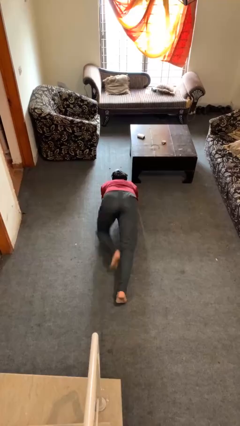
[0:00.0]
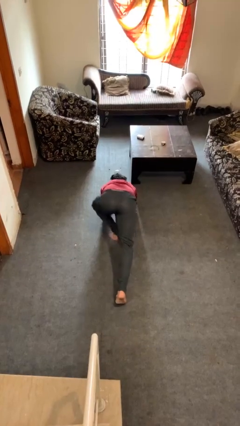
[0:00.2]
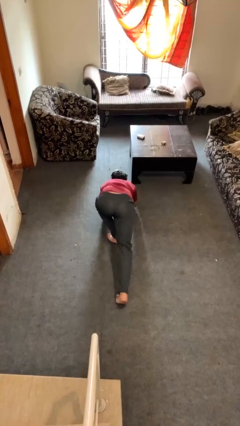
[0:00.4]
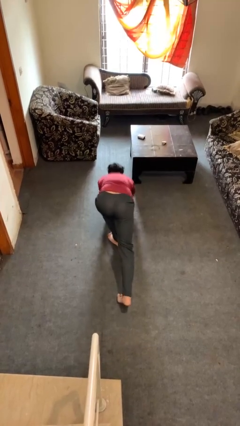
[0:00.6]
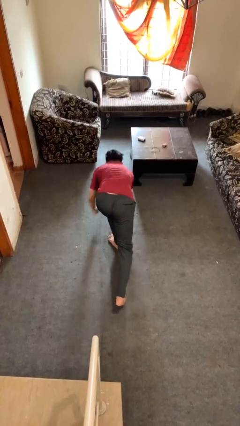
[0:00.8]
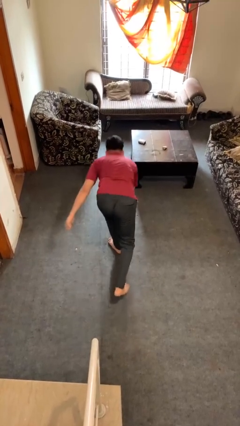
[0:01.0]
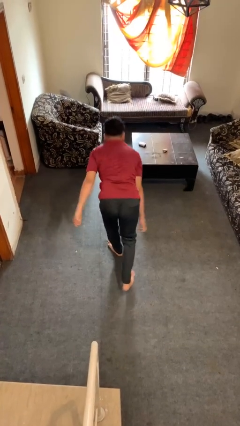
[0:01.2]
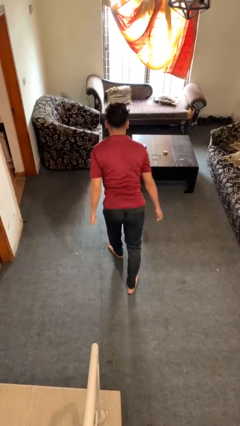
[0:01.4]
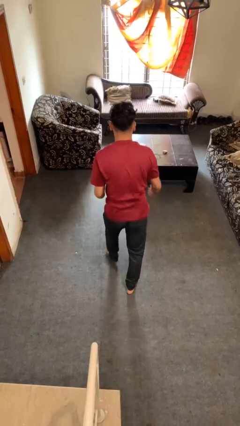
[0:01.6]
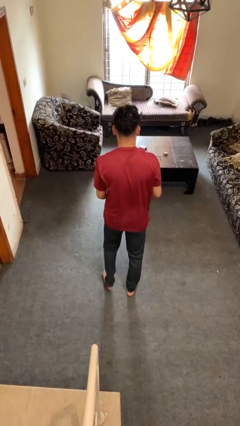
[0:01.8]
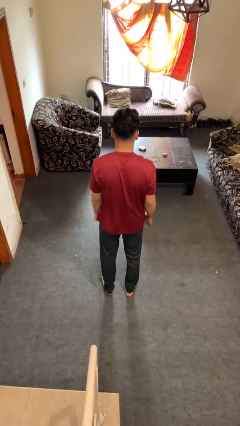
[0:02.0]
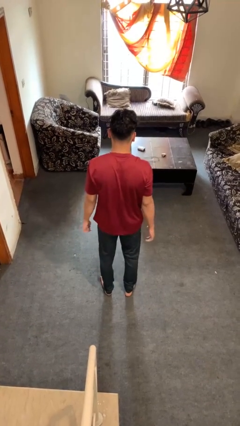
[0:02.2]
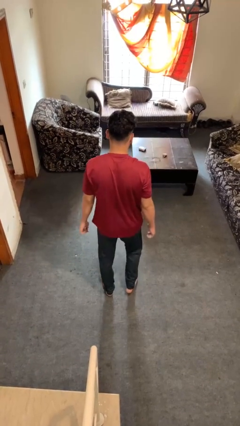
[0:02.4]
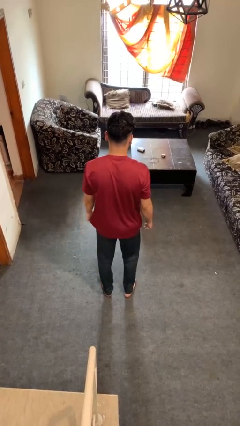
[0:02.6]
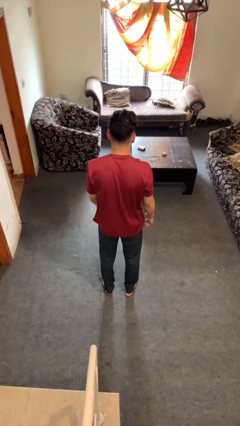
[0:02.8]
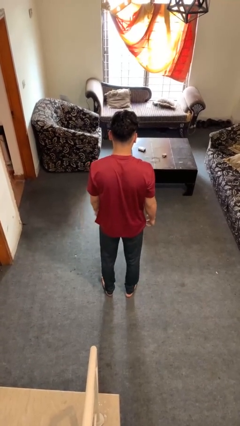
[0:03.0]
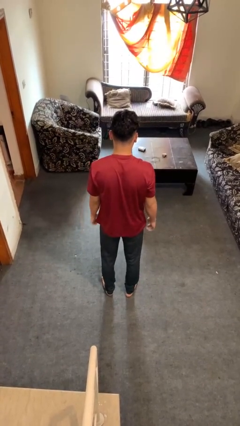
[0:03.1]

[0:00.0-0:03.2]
person stands up from floor

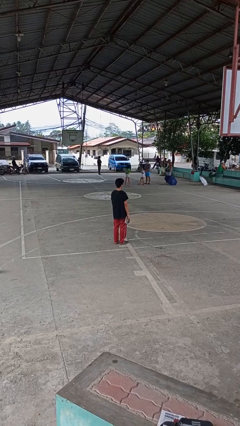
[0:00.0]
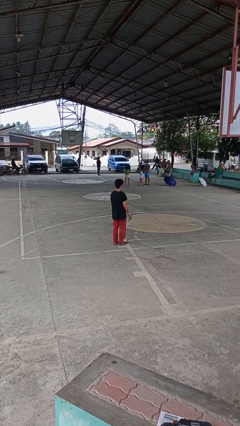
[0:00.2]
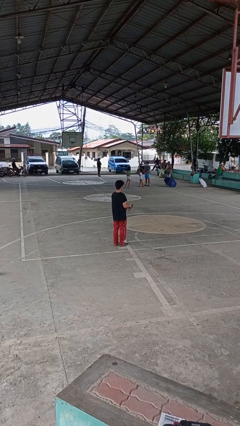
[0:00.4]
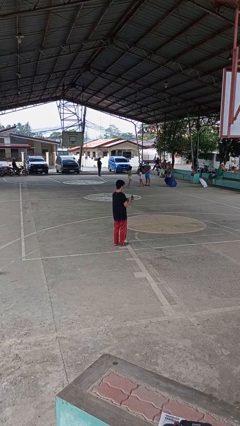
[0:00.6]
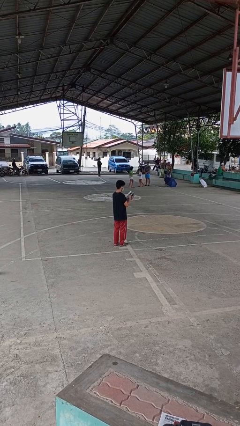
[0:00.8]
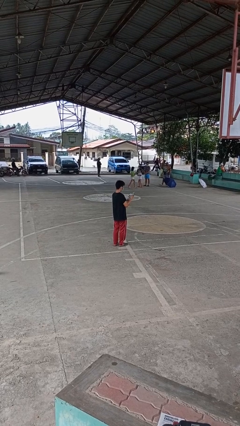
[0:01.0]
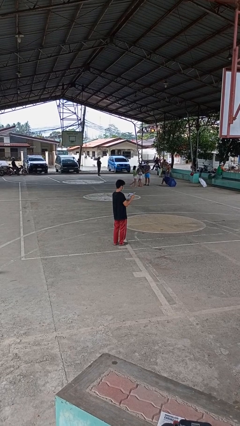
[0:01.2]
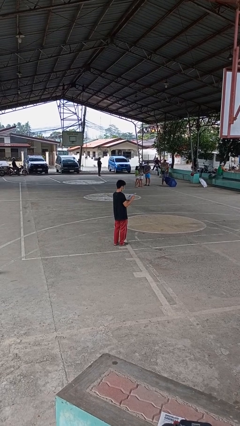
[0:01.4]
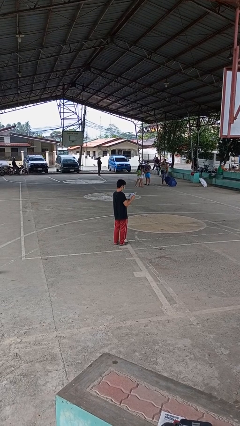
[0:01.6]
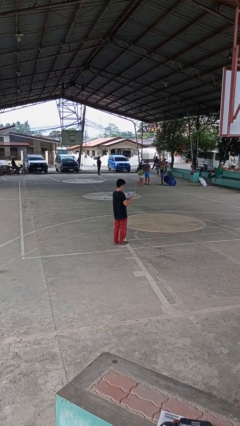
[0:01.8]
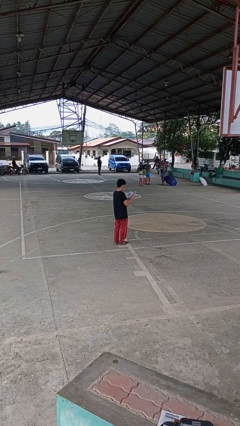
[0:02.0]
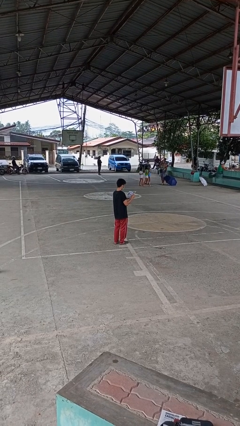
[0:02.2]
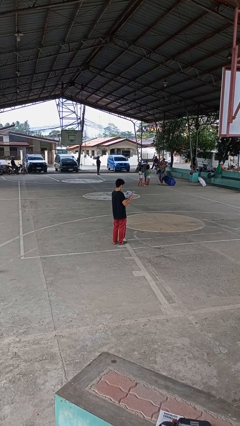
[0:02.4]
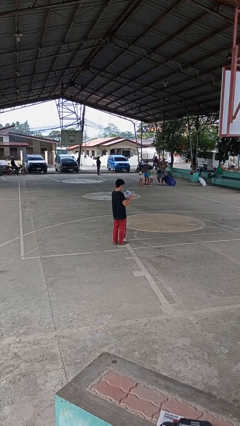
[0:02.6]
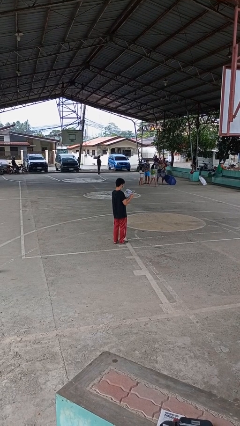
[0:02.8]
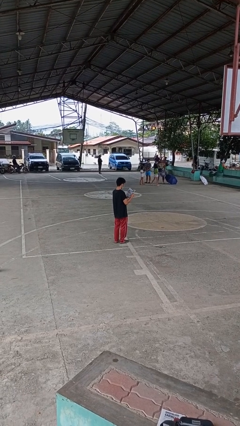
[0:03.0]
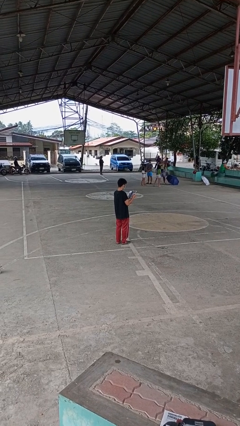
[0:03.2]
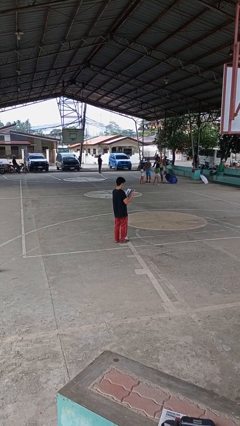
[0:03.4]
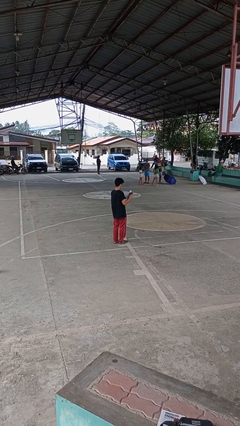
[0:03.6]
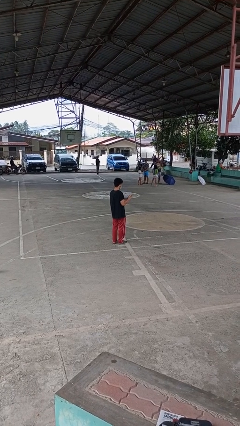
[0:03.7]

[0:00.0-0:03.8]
person reads magazine

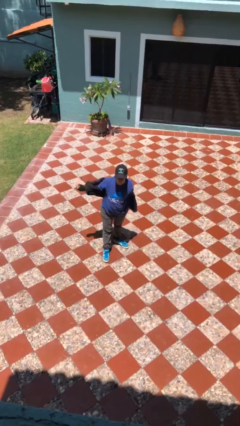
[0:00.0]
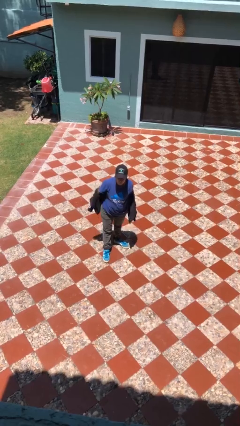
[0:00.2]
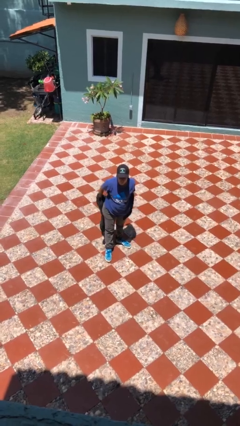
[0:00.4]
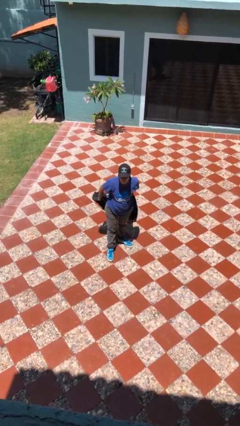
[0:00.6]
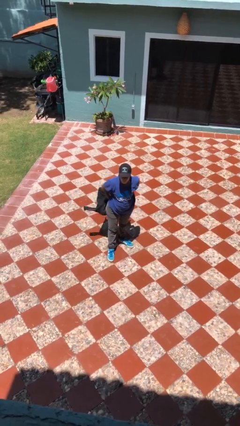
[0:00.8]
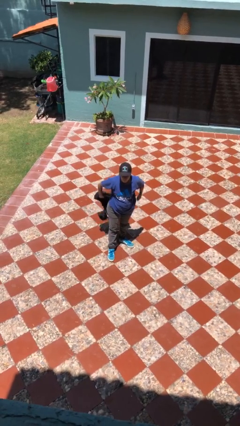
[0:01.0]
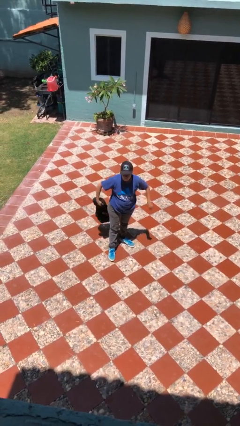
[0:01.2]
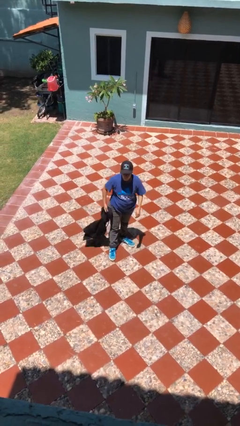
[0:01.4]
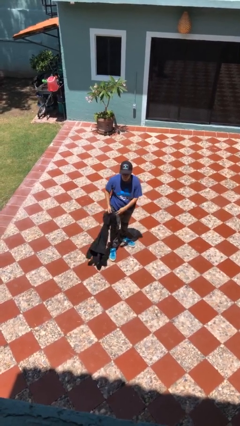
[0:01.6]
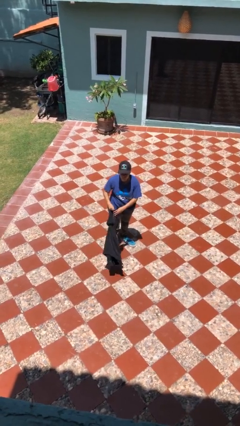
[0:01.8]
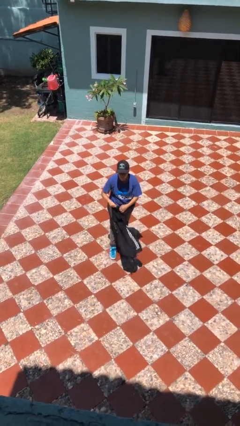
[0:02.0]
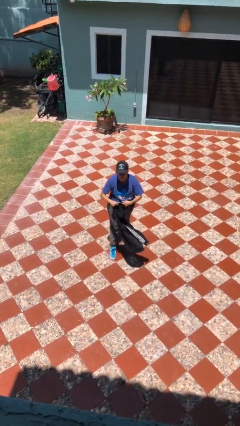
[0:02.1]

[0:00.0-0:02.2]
person takes off jacket

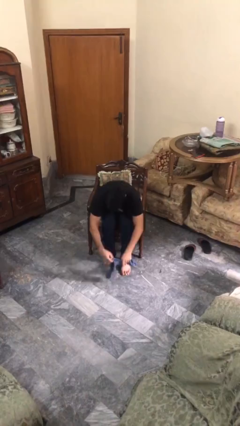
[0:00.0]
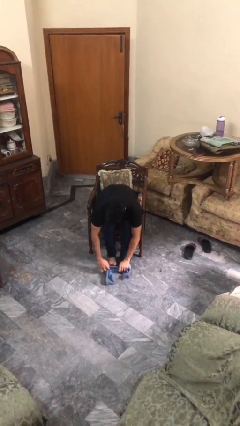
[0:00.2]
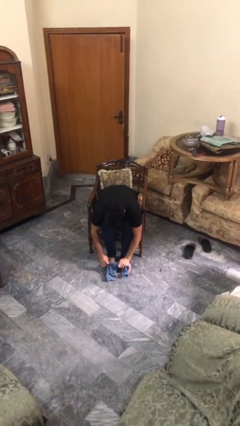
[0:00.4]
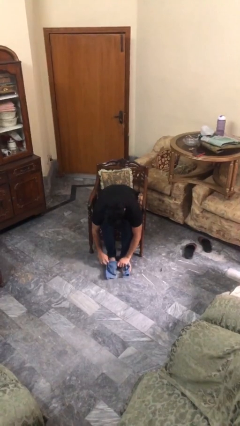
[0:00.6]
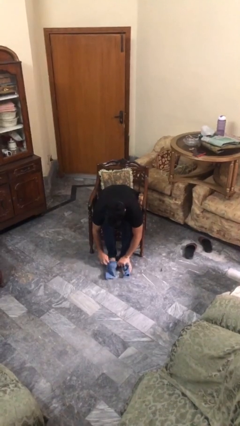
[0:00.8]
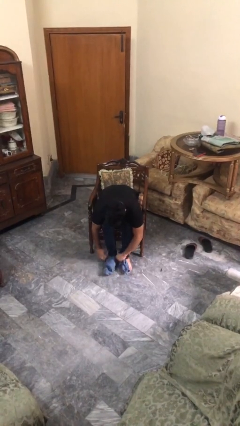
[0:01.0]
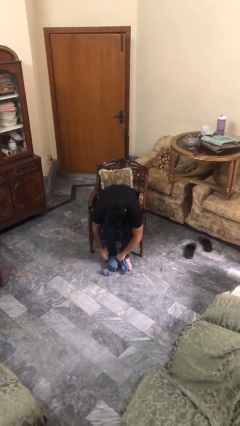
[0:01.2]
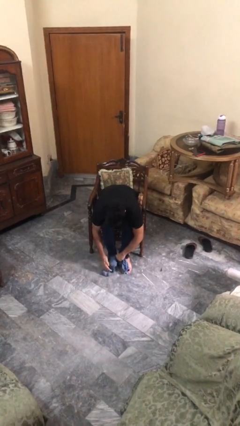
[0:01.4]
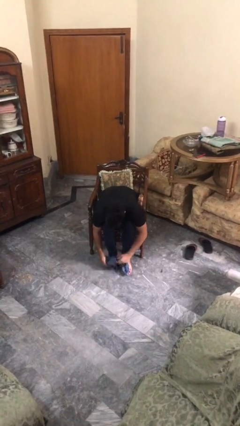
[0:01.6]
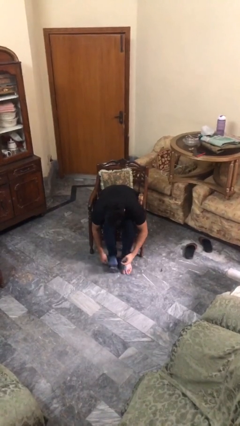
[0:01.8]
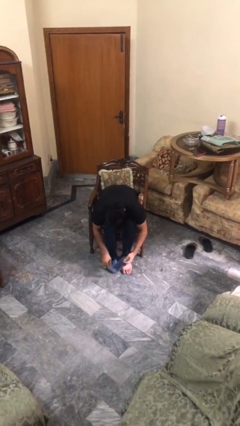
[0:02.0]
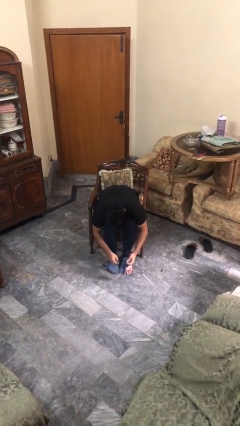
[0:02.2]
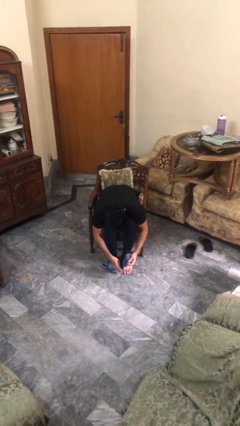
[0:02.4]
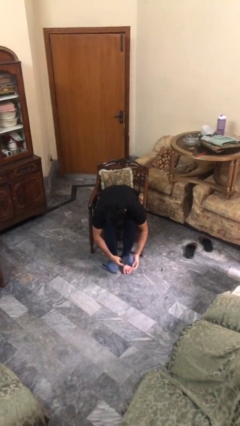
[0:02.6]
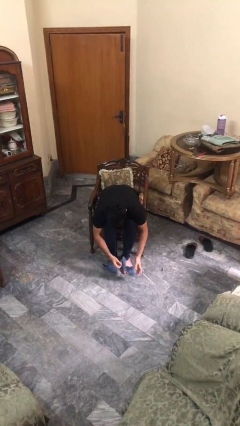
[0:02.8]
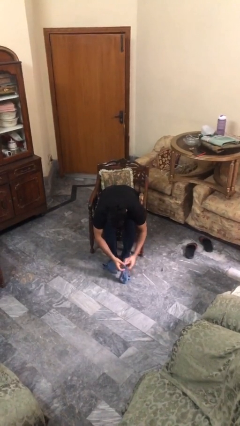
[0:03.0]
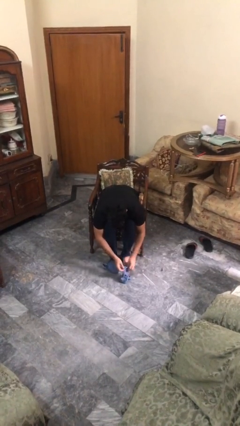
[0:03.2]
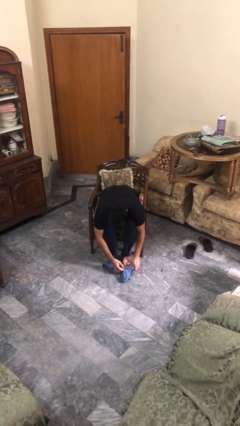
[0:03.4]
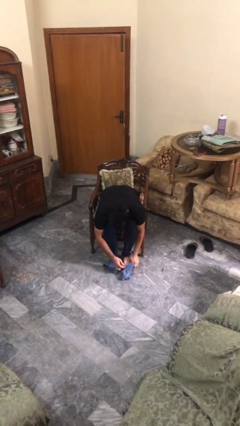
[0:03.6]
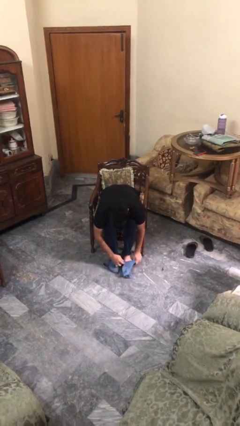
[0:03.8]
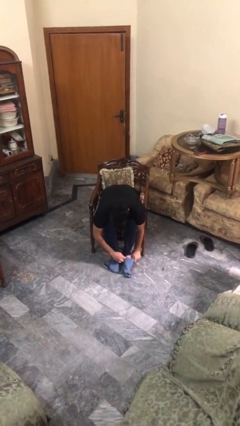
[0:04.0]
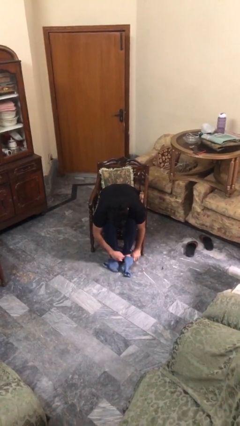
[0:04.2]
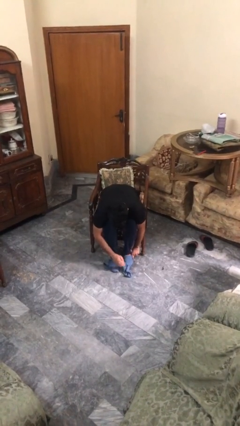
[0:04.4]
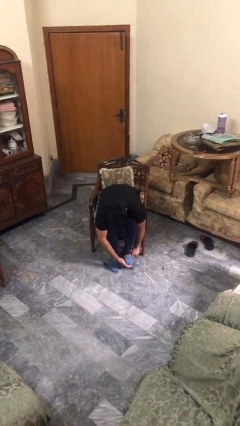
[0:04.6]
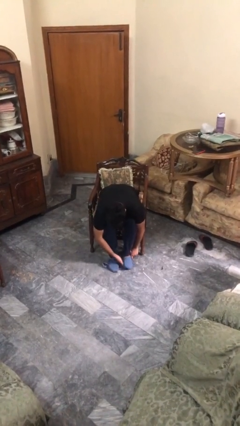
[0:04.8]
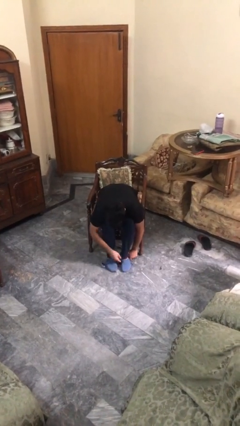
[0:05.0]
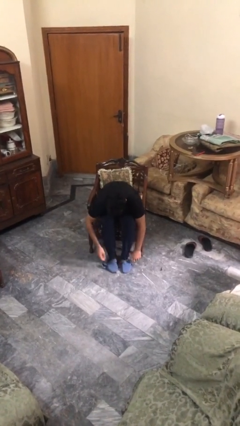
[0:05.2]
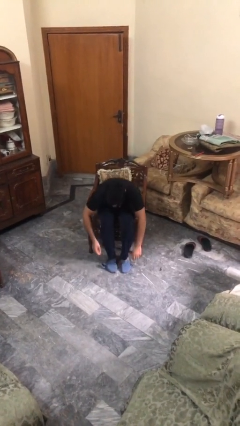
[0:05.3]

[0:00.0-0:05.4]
person puts on socks

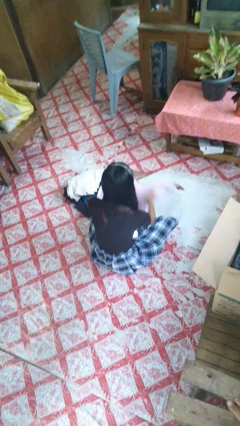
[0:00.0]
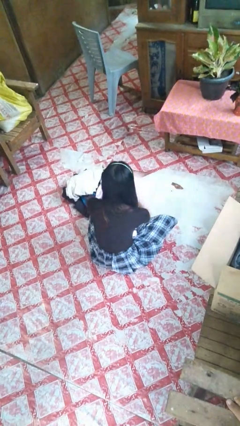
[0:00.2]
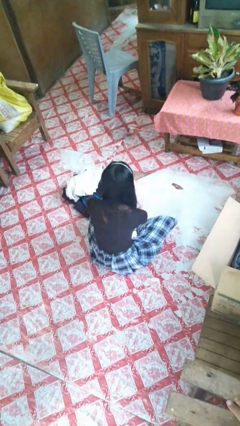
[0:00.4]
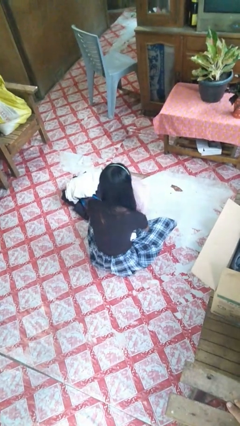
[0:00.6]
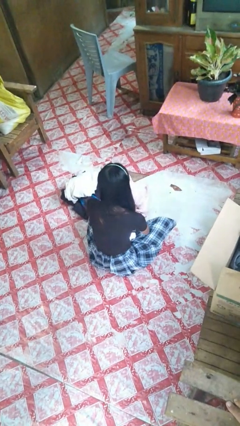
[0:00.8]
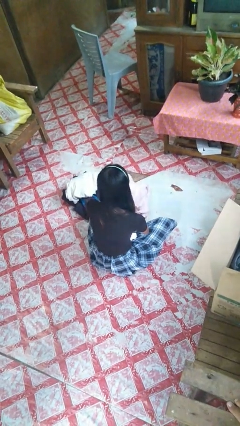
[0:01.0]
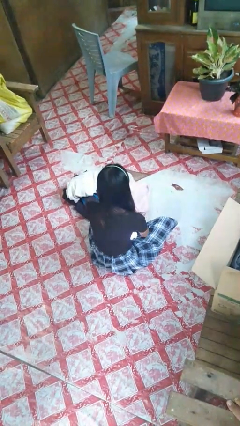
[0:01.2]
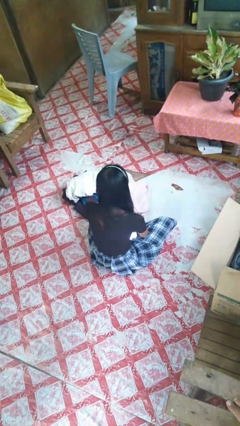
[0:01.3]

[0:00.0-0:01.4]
person folds towel

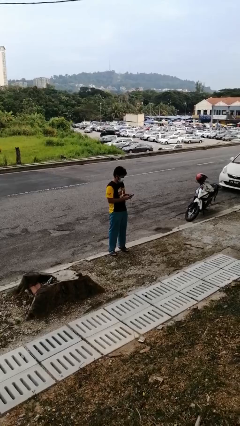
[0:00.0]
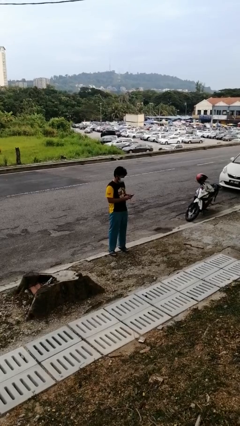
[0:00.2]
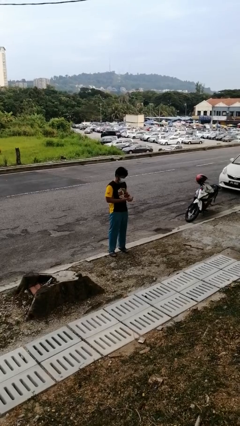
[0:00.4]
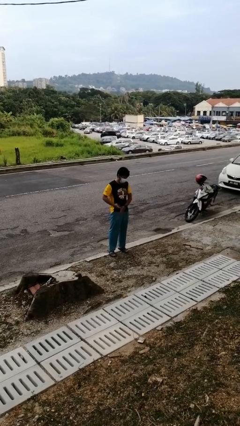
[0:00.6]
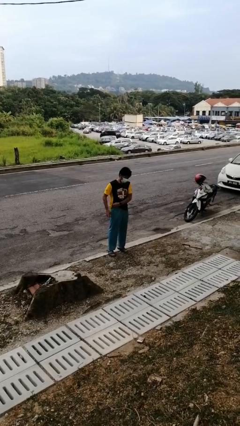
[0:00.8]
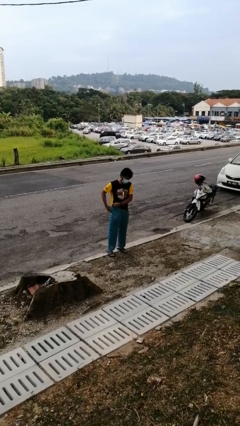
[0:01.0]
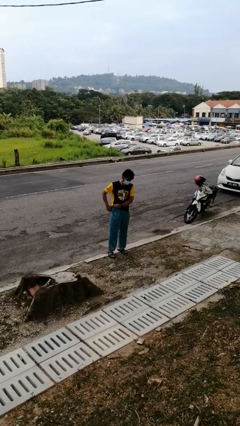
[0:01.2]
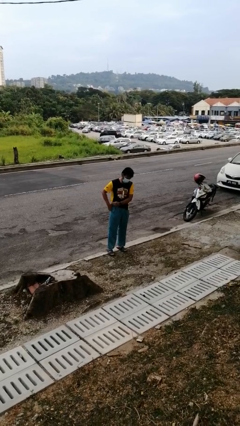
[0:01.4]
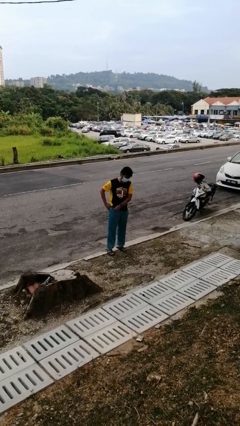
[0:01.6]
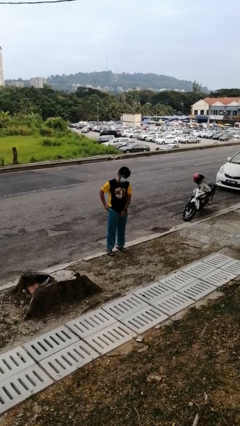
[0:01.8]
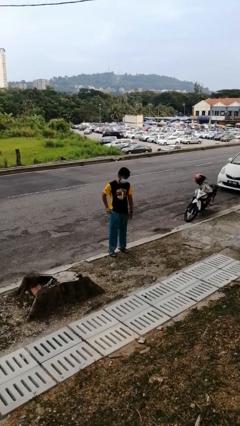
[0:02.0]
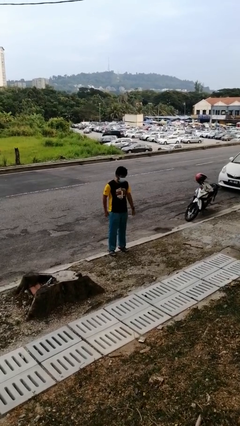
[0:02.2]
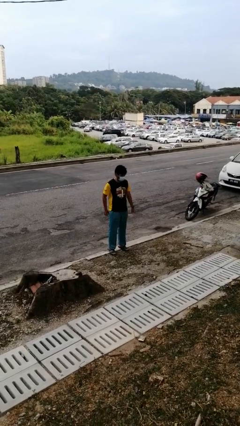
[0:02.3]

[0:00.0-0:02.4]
person puts phone into pocket
